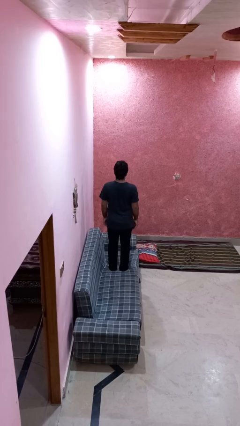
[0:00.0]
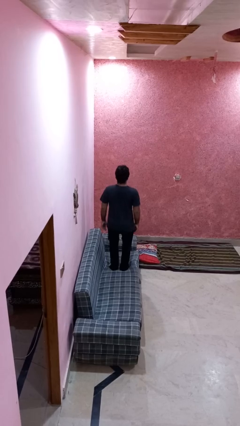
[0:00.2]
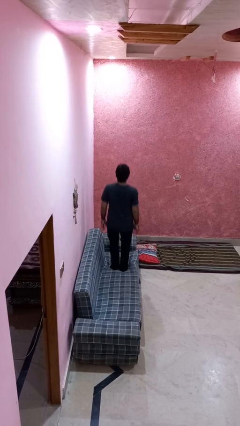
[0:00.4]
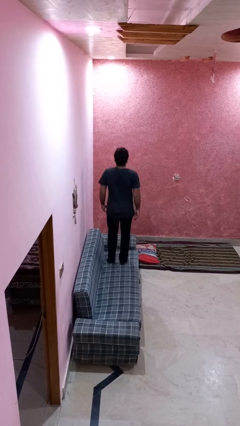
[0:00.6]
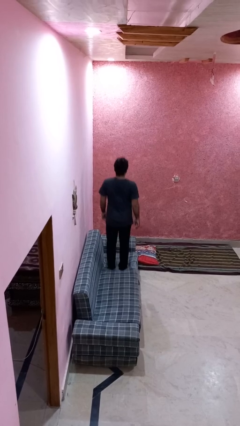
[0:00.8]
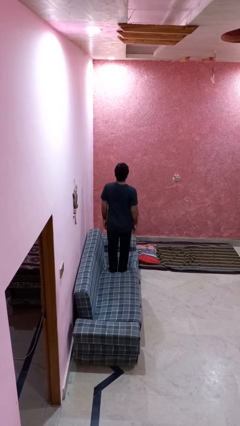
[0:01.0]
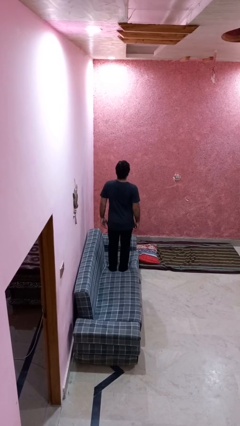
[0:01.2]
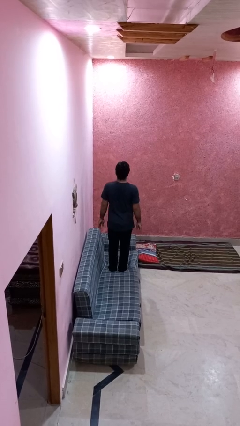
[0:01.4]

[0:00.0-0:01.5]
person jumps on couch

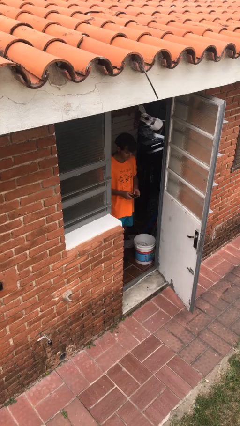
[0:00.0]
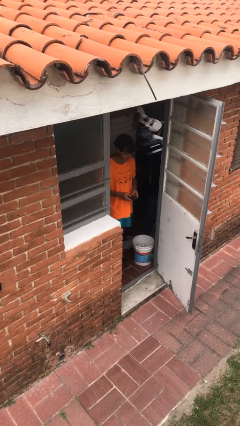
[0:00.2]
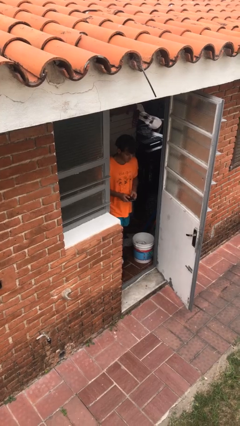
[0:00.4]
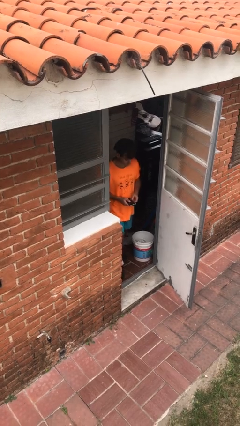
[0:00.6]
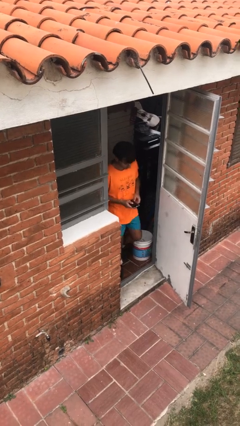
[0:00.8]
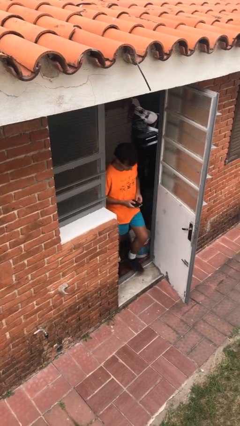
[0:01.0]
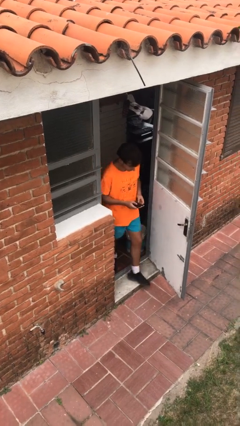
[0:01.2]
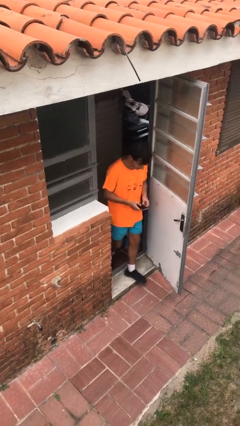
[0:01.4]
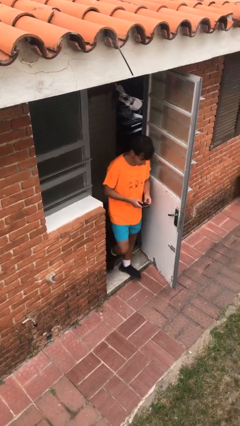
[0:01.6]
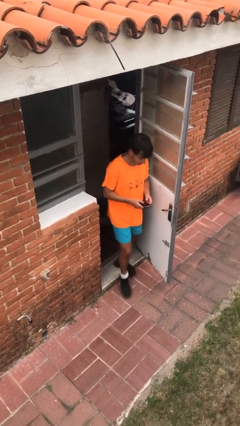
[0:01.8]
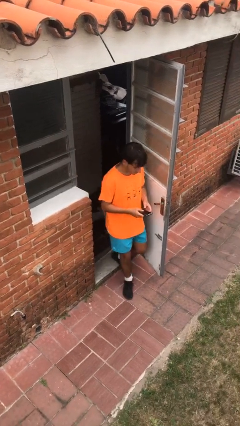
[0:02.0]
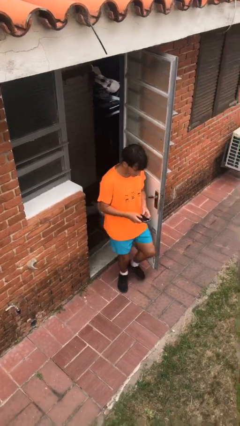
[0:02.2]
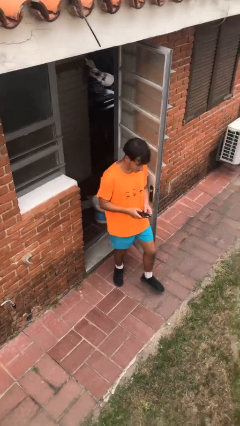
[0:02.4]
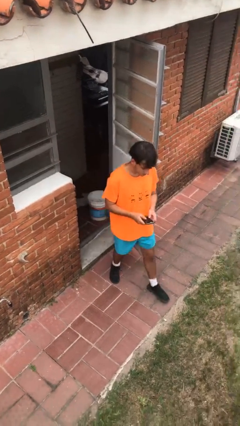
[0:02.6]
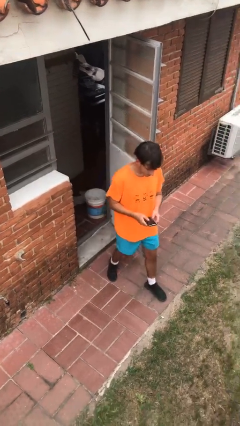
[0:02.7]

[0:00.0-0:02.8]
person enters scene through structure

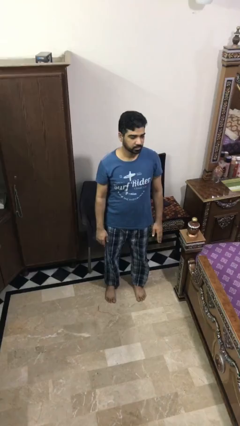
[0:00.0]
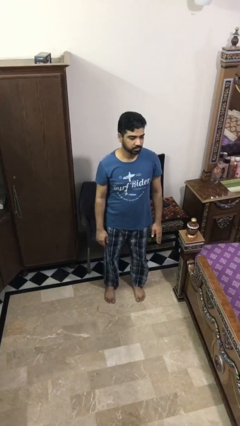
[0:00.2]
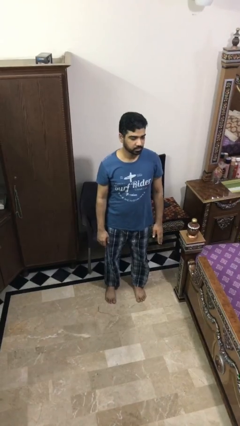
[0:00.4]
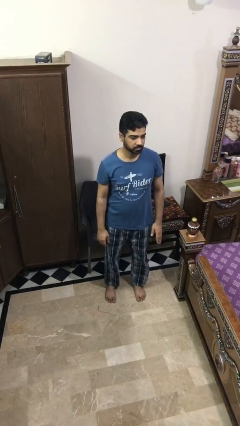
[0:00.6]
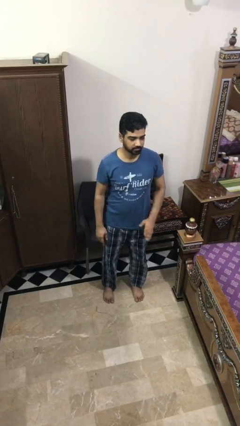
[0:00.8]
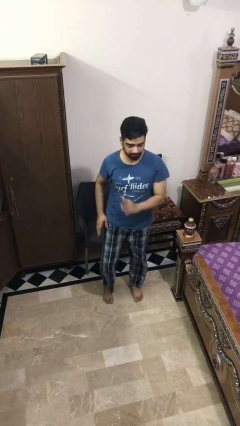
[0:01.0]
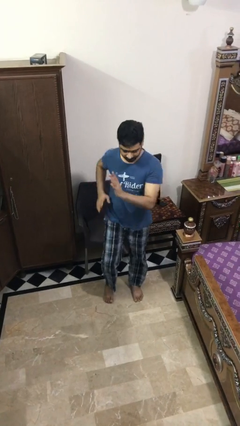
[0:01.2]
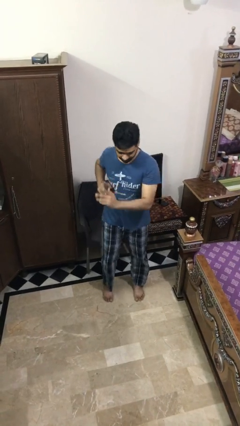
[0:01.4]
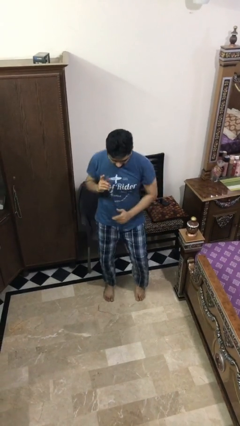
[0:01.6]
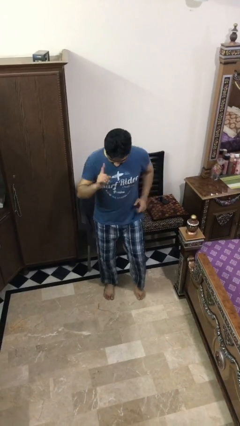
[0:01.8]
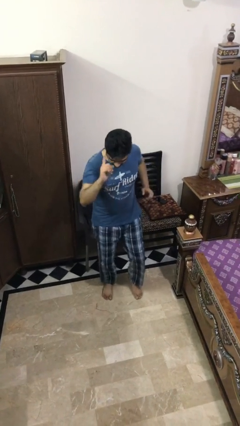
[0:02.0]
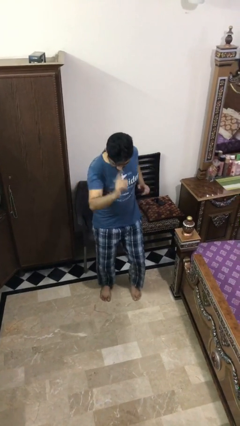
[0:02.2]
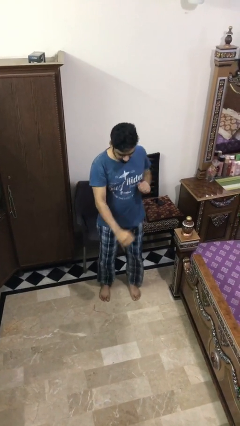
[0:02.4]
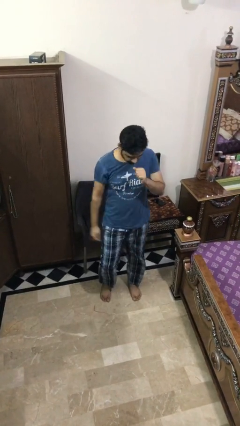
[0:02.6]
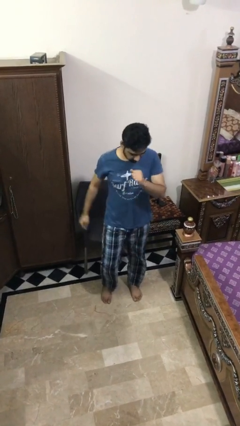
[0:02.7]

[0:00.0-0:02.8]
person dances in place

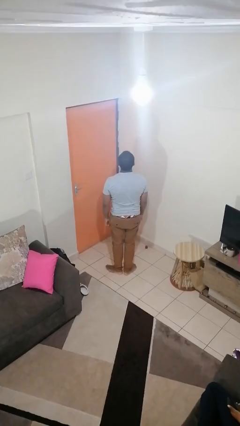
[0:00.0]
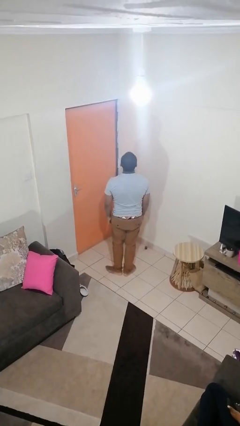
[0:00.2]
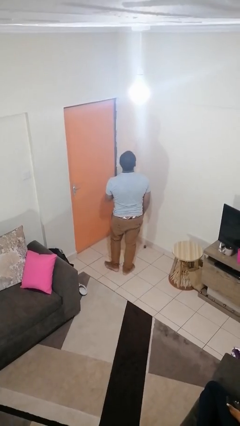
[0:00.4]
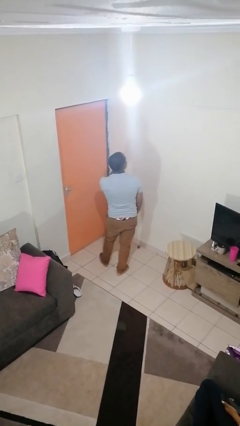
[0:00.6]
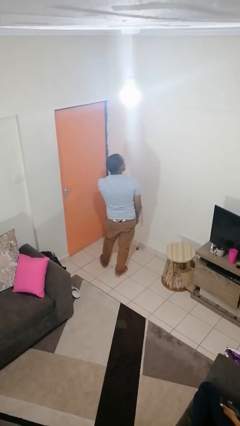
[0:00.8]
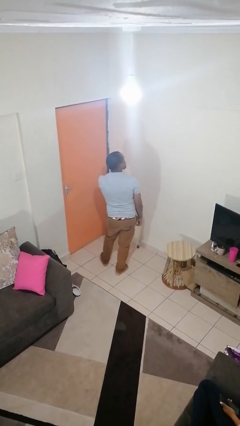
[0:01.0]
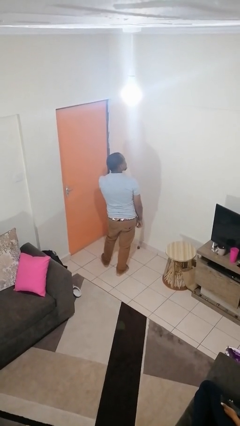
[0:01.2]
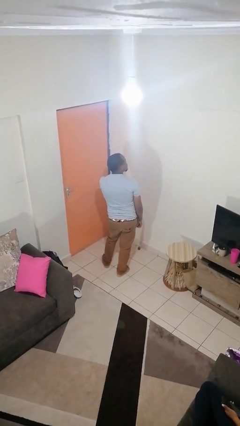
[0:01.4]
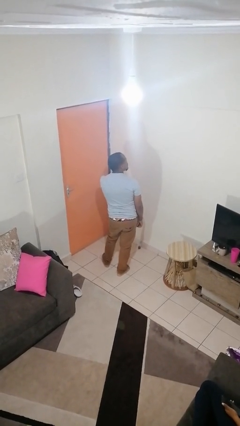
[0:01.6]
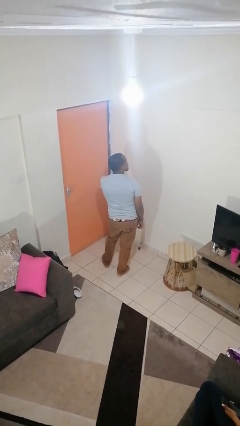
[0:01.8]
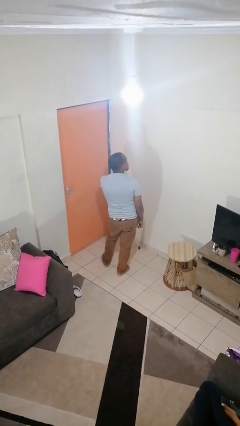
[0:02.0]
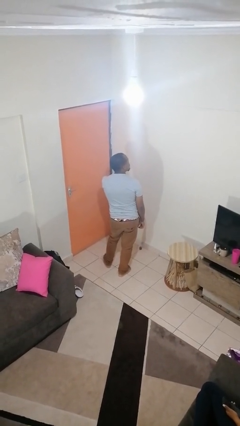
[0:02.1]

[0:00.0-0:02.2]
person gestures listen closely

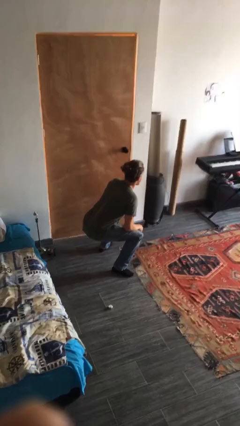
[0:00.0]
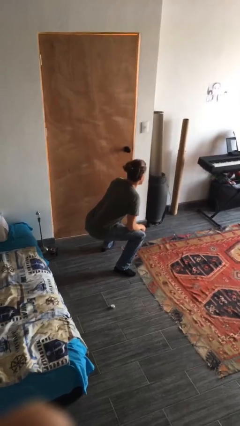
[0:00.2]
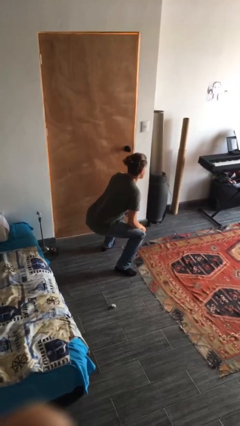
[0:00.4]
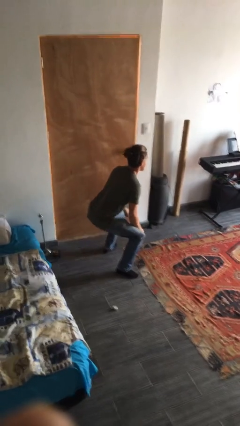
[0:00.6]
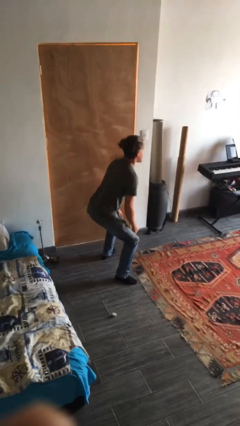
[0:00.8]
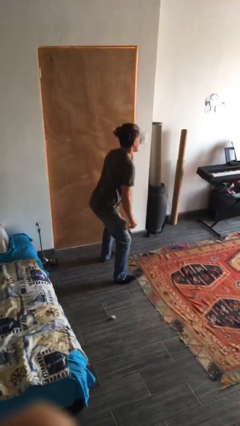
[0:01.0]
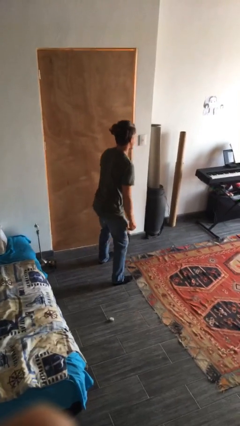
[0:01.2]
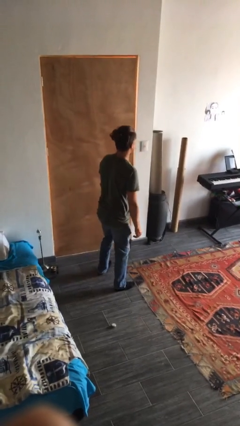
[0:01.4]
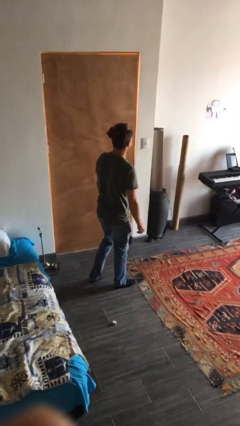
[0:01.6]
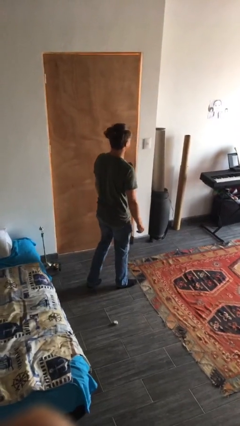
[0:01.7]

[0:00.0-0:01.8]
person stands up

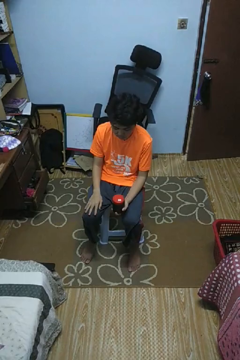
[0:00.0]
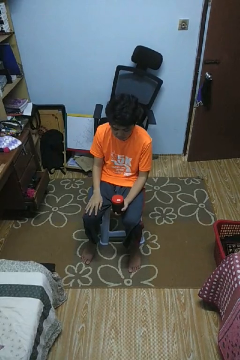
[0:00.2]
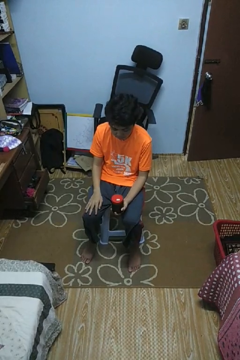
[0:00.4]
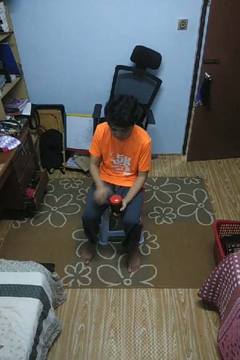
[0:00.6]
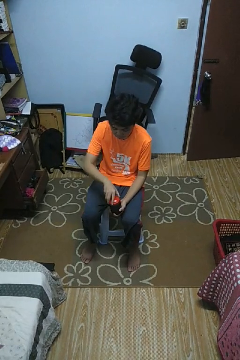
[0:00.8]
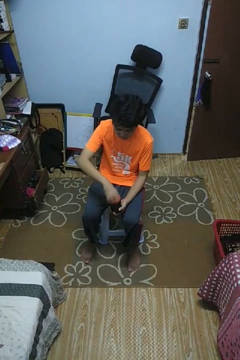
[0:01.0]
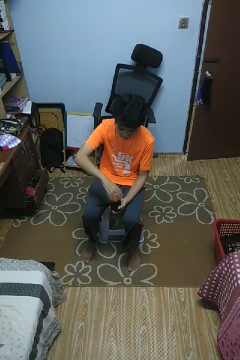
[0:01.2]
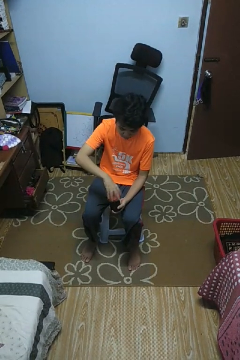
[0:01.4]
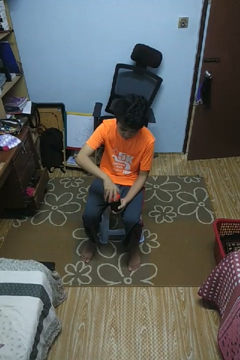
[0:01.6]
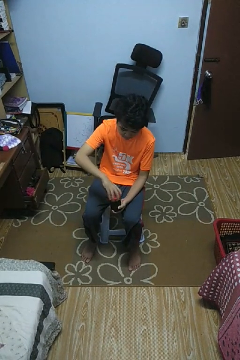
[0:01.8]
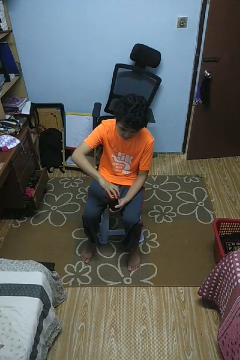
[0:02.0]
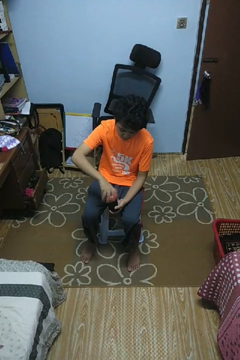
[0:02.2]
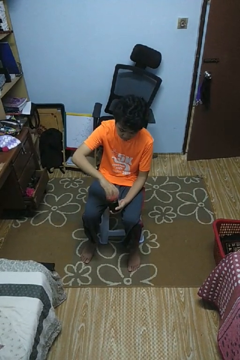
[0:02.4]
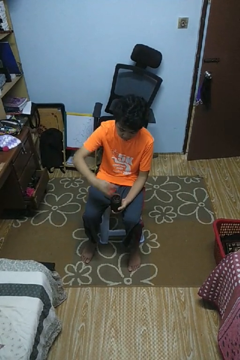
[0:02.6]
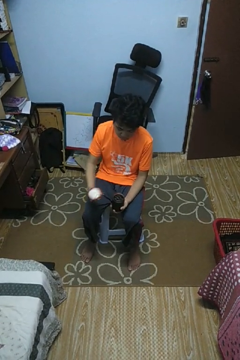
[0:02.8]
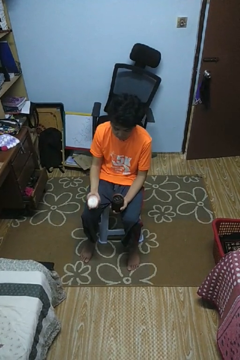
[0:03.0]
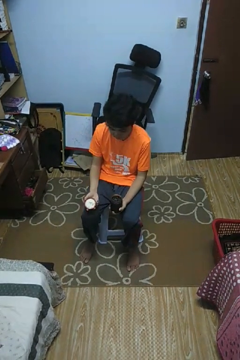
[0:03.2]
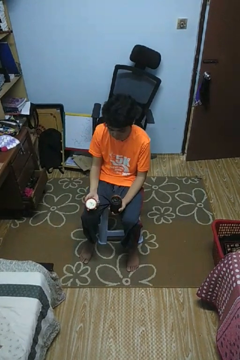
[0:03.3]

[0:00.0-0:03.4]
person opens jar

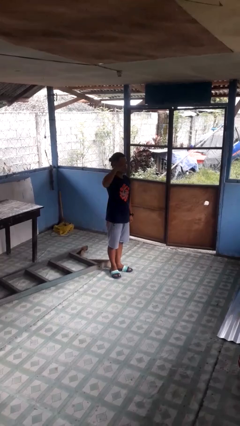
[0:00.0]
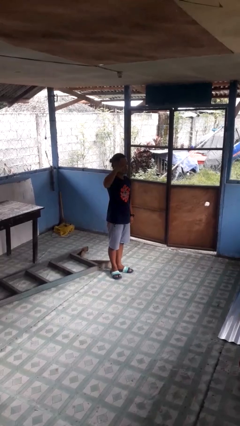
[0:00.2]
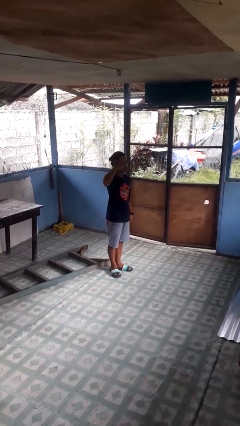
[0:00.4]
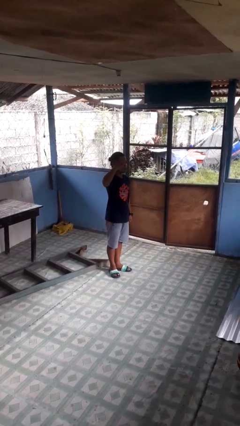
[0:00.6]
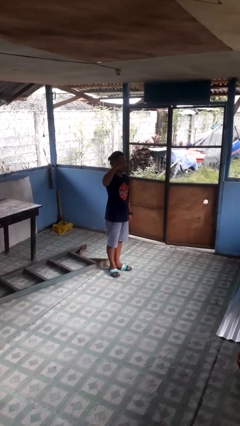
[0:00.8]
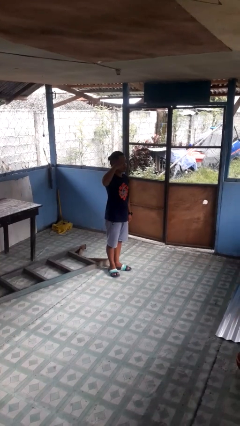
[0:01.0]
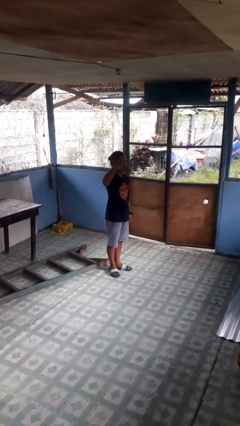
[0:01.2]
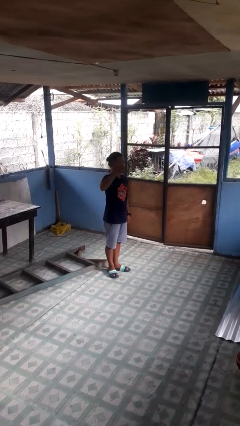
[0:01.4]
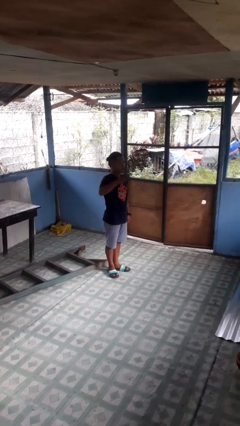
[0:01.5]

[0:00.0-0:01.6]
person salutes

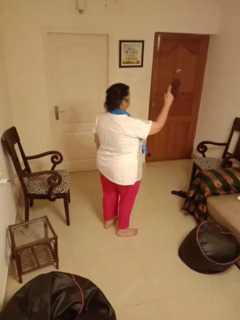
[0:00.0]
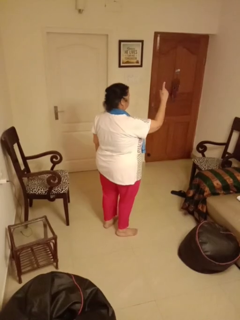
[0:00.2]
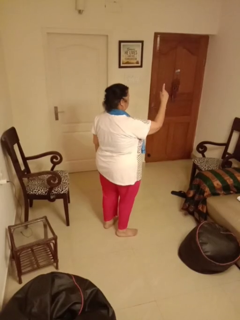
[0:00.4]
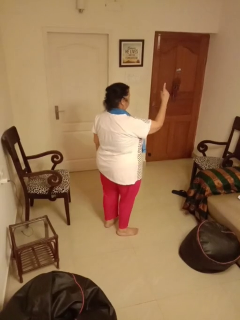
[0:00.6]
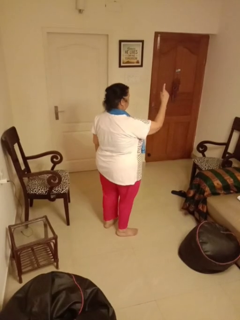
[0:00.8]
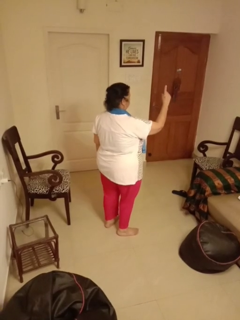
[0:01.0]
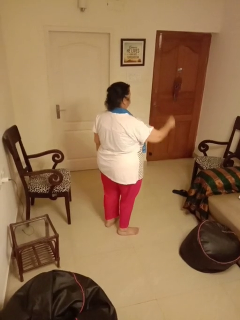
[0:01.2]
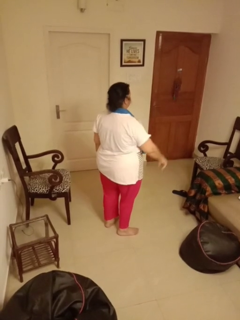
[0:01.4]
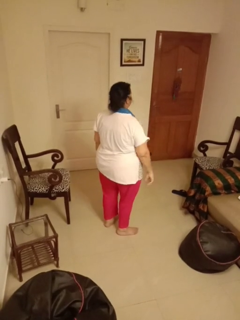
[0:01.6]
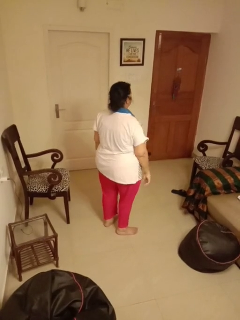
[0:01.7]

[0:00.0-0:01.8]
person gestures number one
